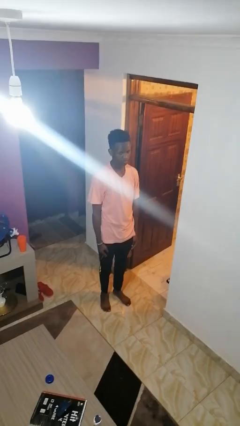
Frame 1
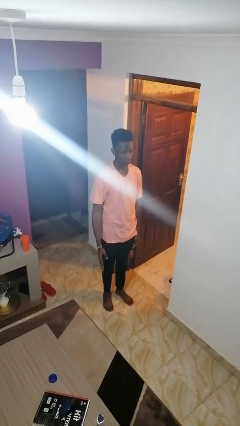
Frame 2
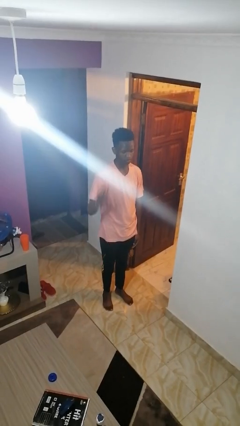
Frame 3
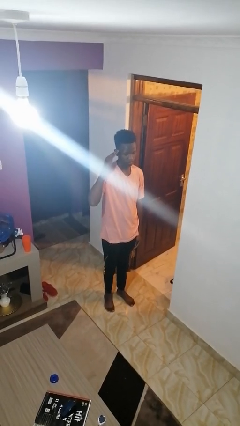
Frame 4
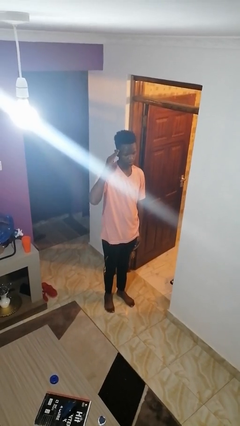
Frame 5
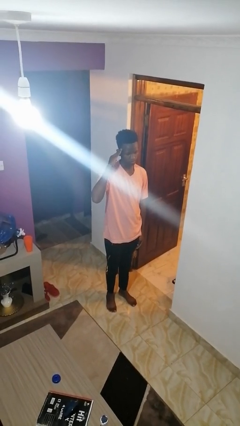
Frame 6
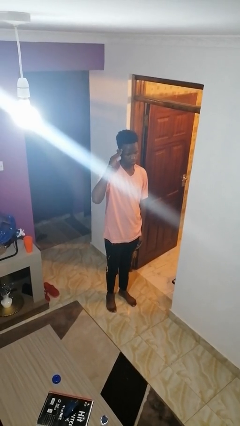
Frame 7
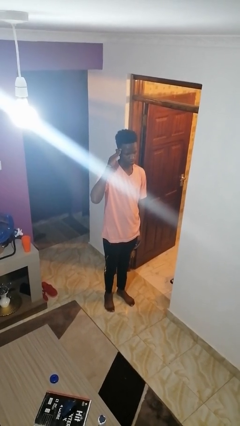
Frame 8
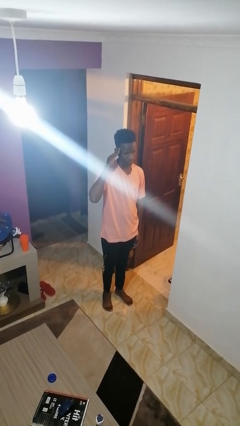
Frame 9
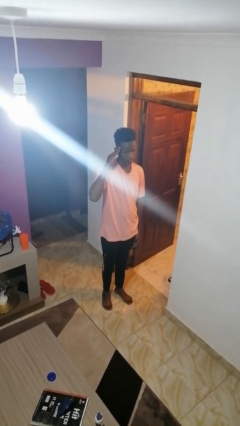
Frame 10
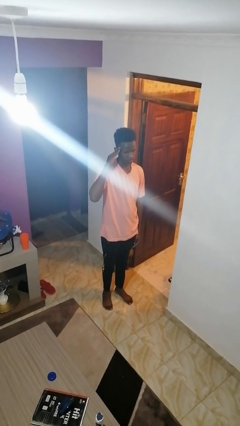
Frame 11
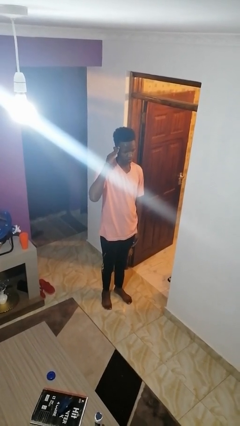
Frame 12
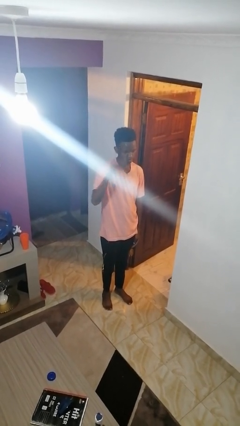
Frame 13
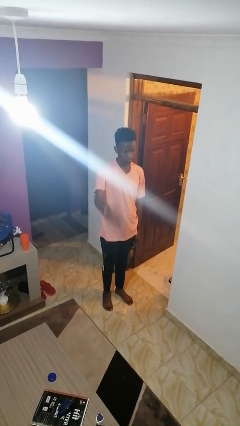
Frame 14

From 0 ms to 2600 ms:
person salutes

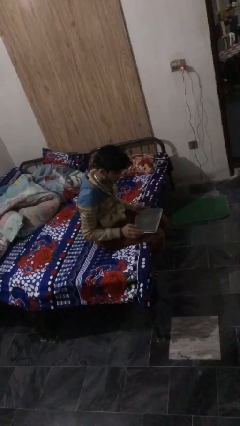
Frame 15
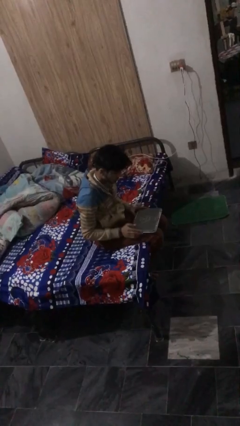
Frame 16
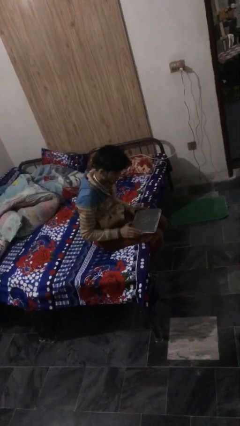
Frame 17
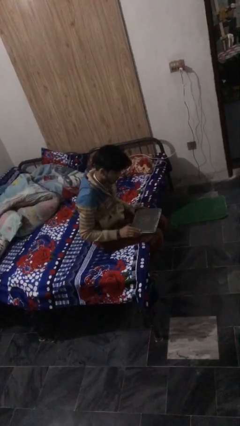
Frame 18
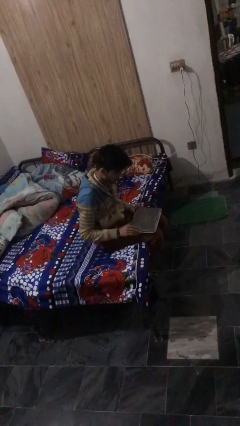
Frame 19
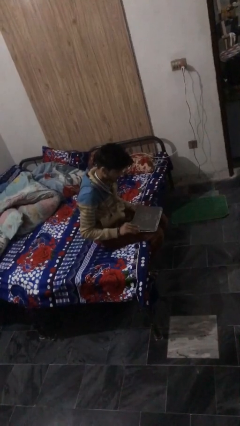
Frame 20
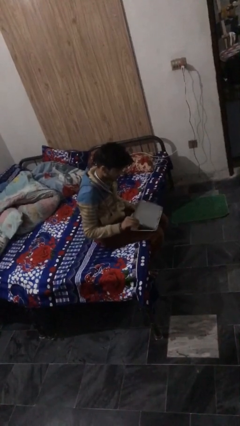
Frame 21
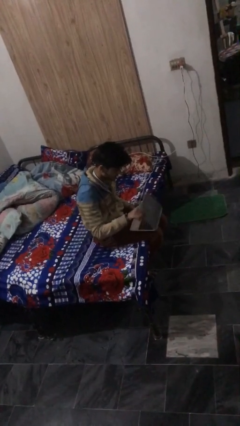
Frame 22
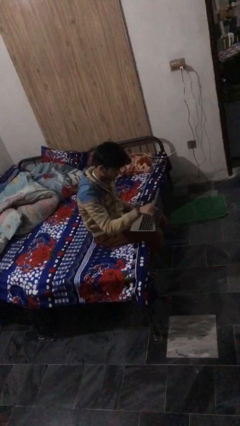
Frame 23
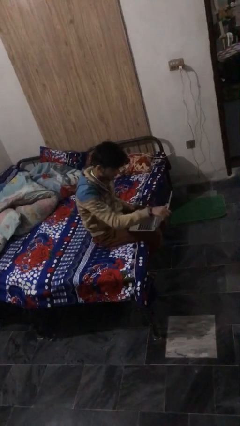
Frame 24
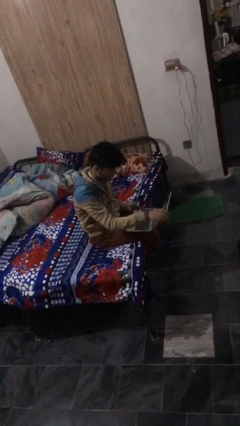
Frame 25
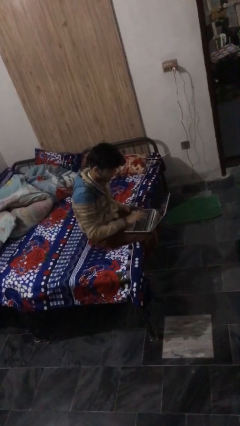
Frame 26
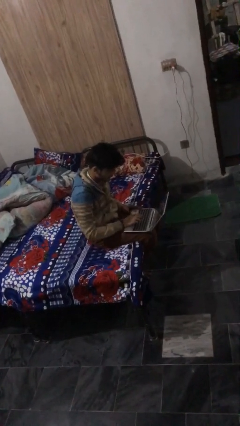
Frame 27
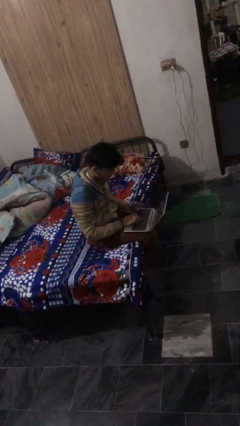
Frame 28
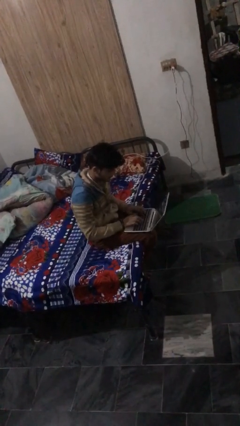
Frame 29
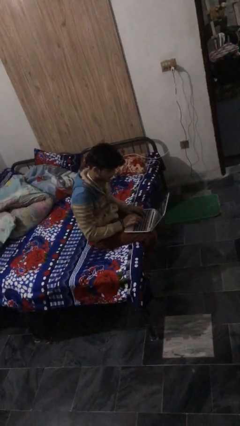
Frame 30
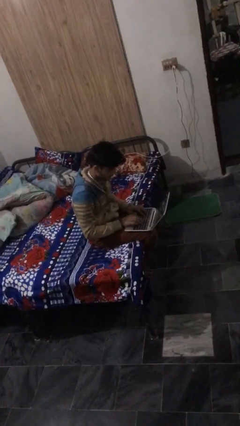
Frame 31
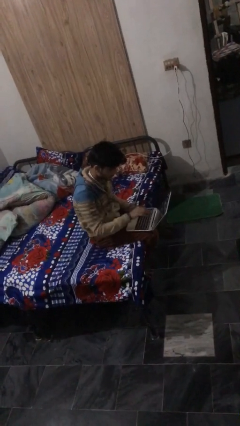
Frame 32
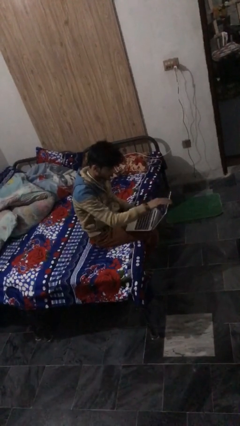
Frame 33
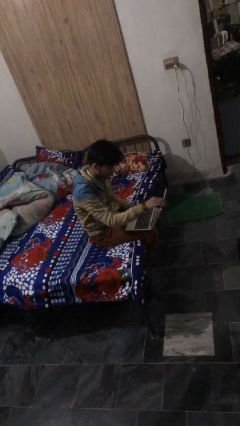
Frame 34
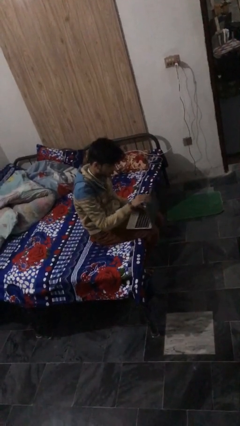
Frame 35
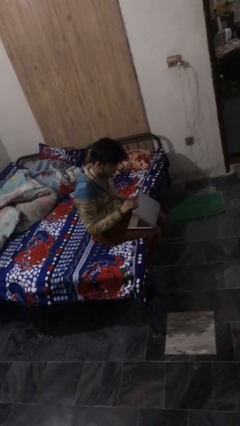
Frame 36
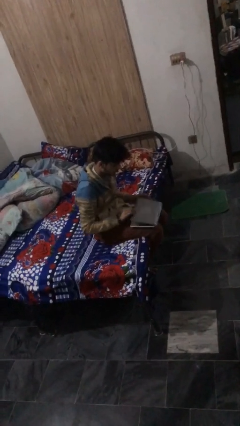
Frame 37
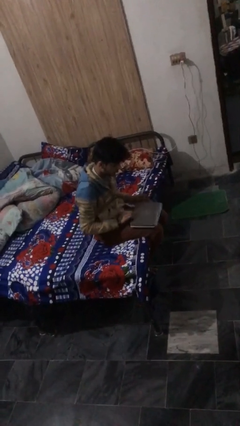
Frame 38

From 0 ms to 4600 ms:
person interacts with laptop

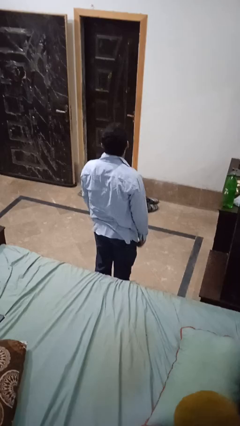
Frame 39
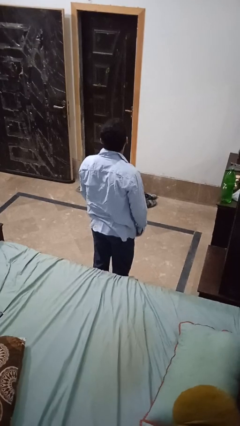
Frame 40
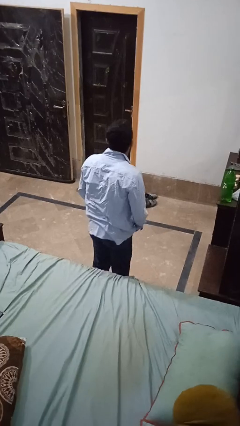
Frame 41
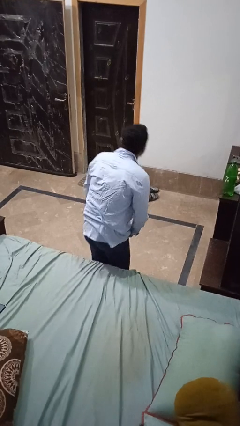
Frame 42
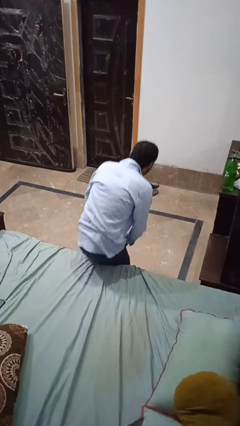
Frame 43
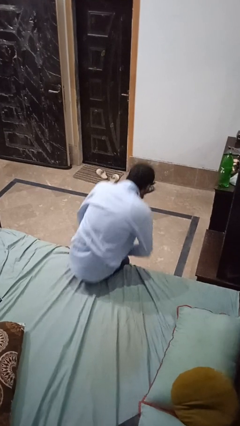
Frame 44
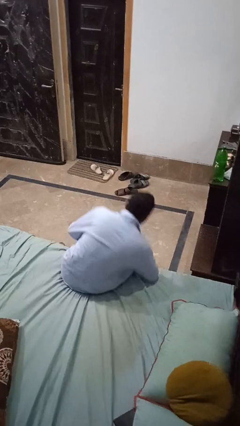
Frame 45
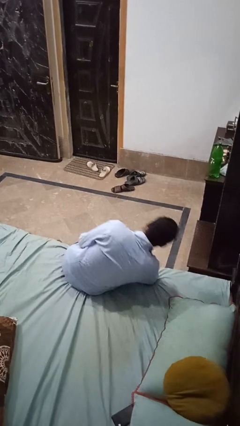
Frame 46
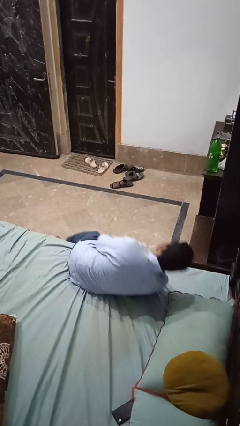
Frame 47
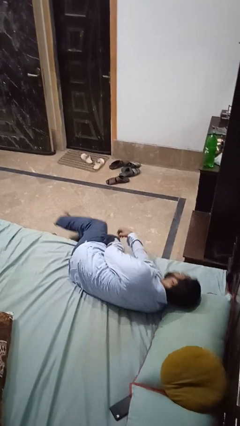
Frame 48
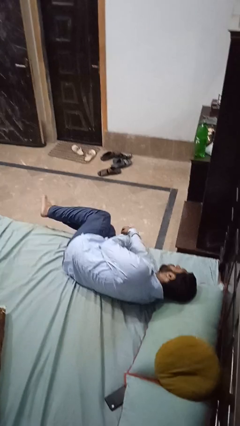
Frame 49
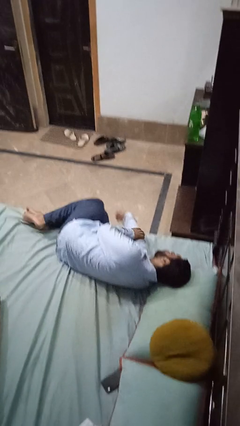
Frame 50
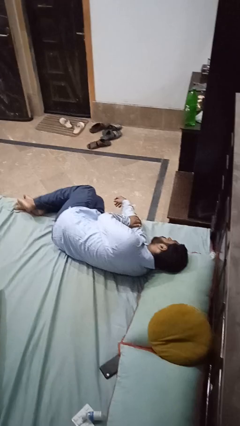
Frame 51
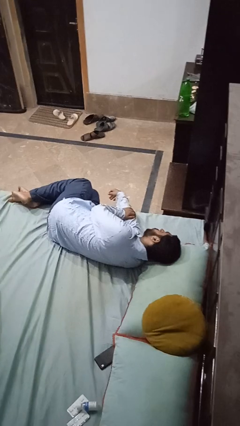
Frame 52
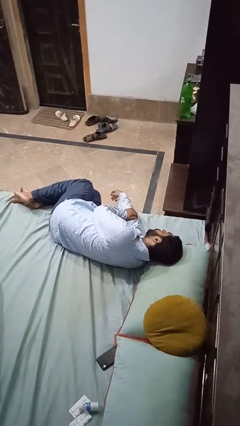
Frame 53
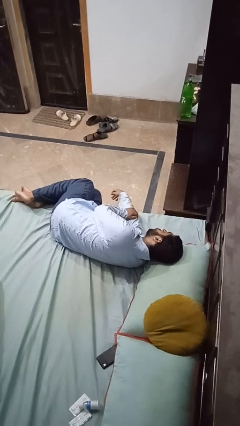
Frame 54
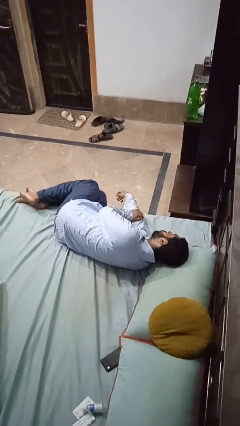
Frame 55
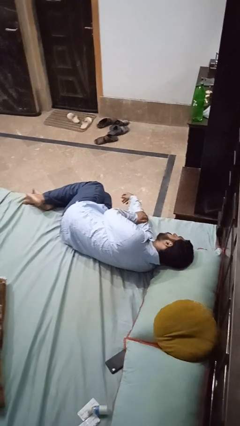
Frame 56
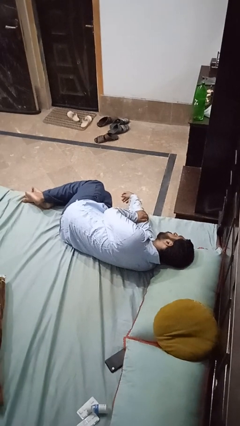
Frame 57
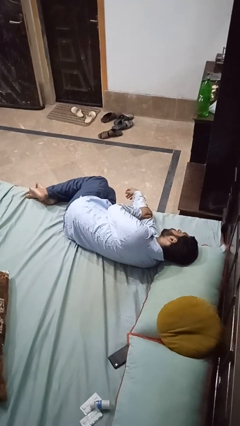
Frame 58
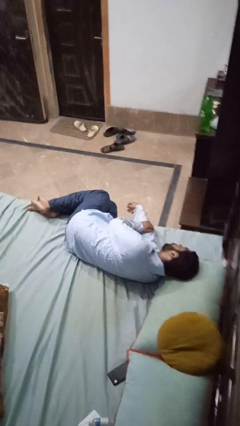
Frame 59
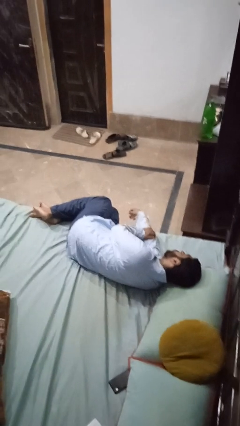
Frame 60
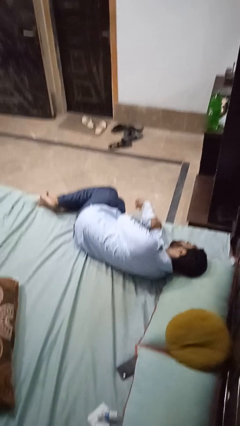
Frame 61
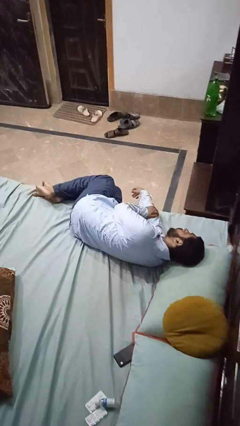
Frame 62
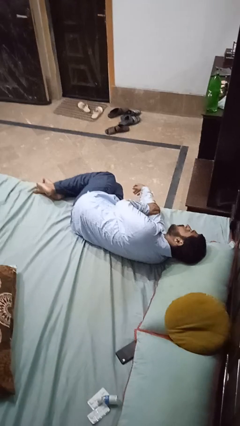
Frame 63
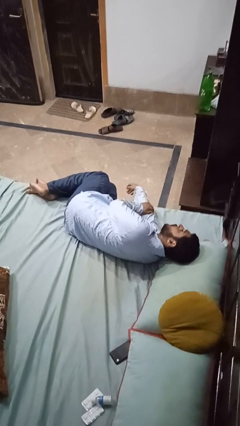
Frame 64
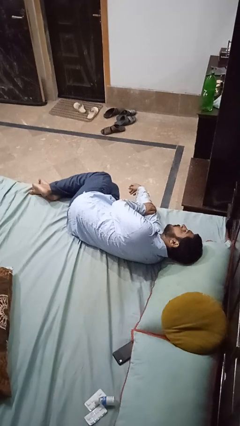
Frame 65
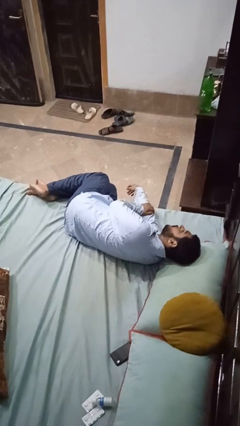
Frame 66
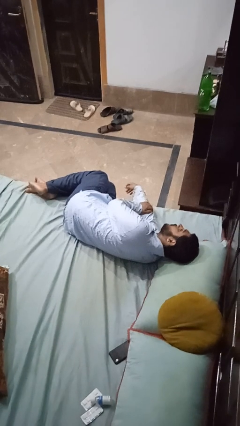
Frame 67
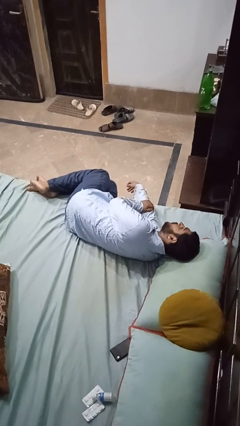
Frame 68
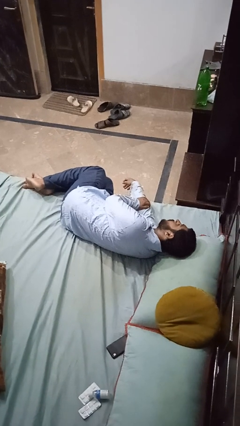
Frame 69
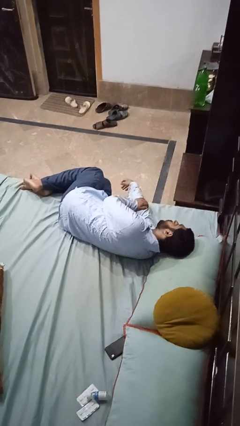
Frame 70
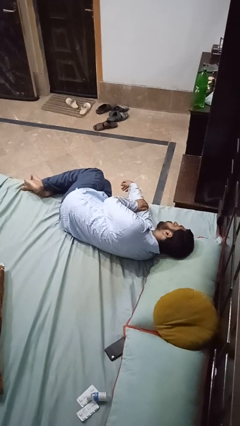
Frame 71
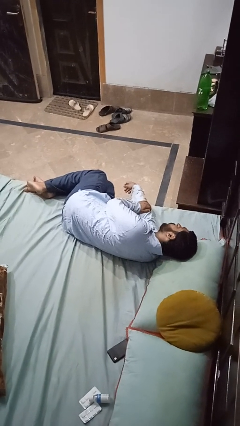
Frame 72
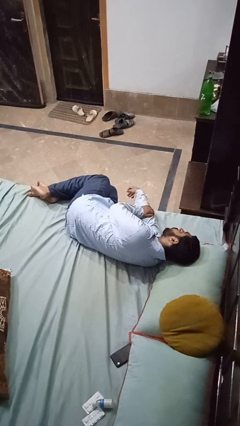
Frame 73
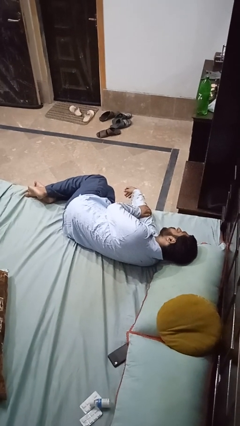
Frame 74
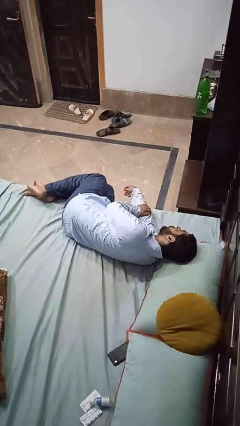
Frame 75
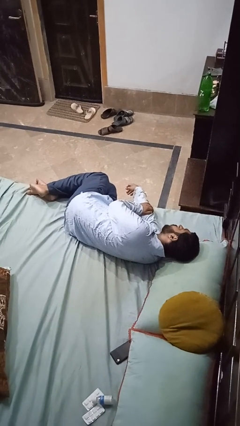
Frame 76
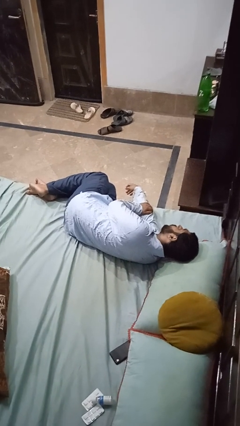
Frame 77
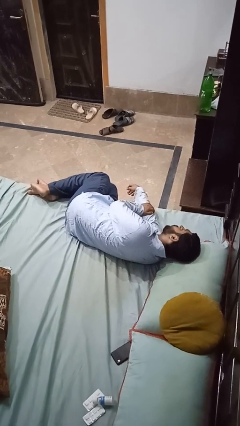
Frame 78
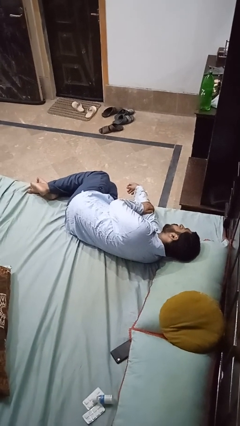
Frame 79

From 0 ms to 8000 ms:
person lies down on bed

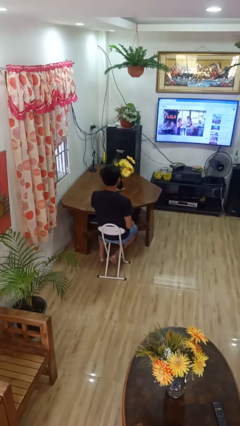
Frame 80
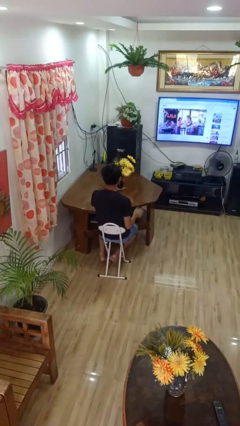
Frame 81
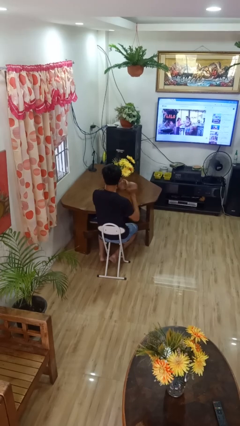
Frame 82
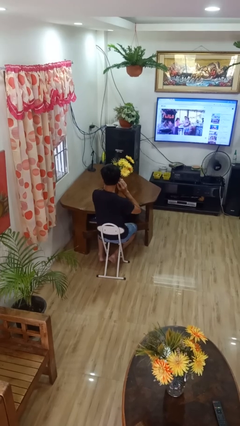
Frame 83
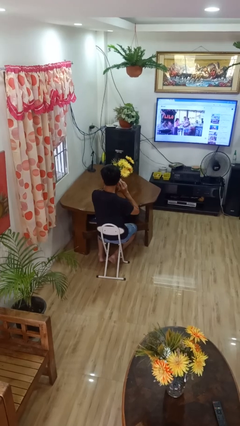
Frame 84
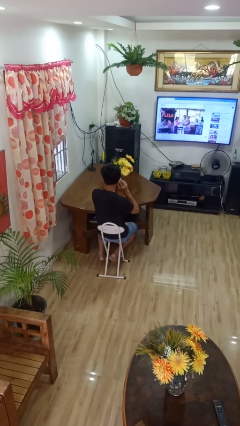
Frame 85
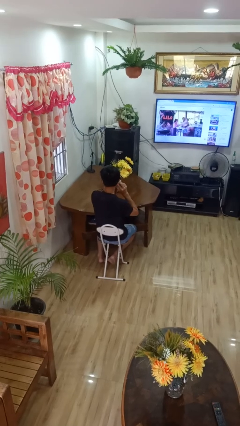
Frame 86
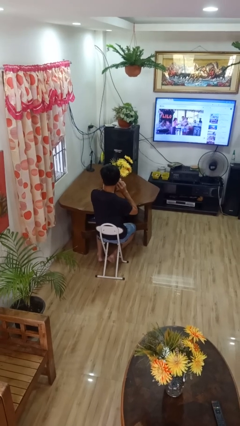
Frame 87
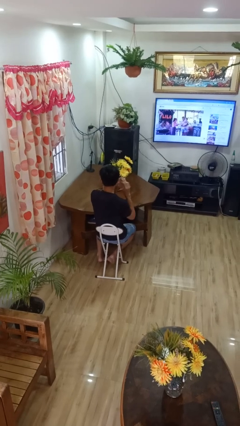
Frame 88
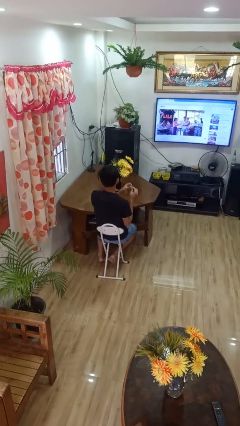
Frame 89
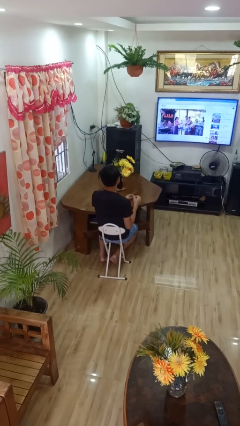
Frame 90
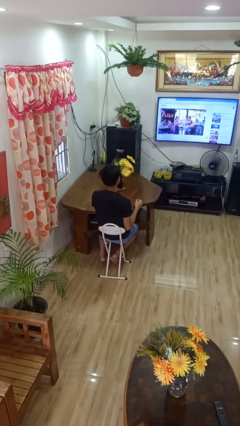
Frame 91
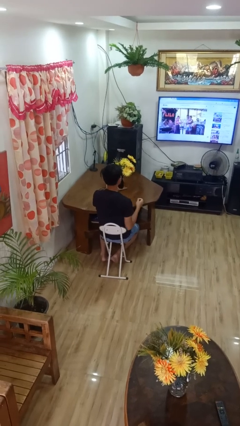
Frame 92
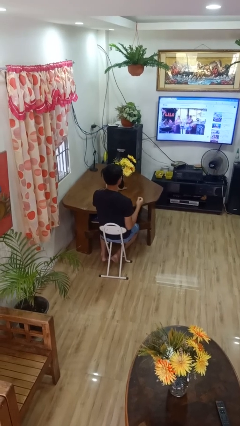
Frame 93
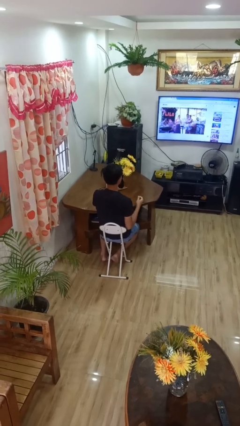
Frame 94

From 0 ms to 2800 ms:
person takes off earrings
